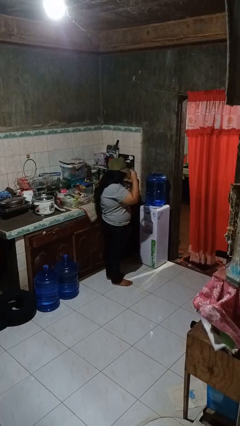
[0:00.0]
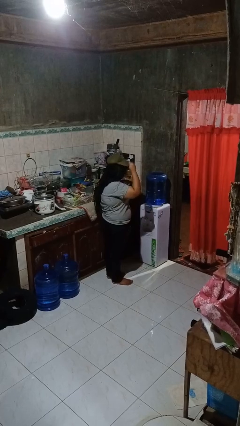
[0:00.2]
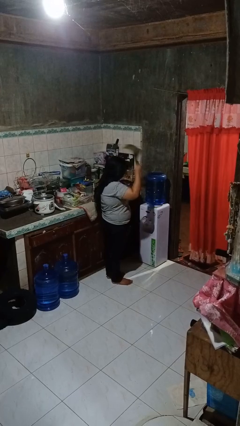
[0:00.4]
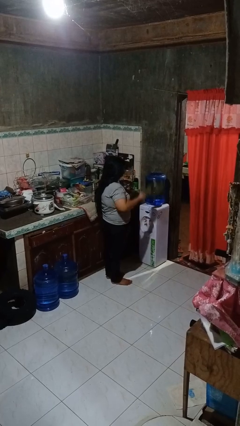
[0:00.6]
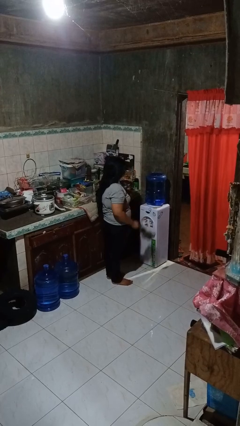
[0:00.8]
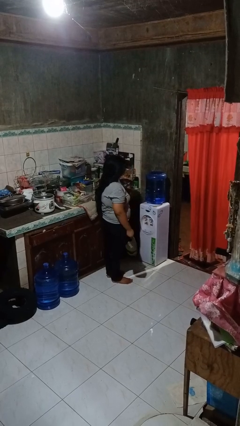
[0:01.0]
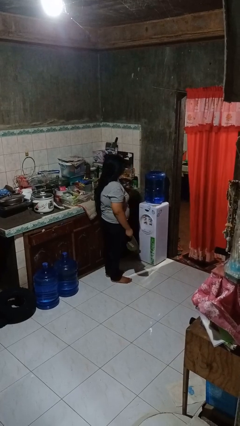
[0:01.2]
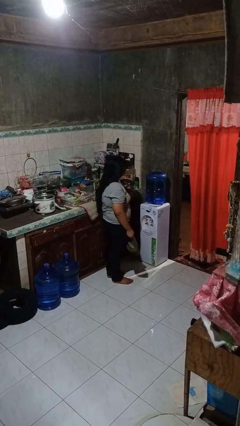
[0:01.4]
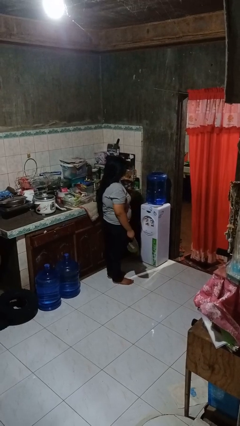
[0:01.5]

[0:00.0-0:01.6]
person takes off hat

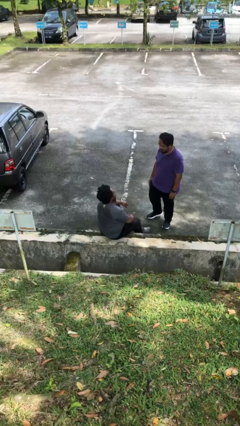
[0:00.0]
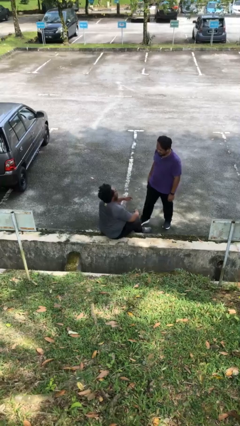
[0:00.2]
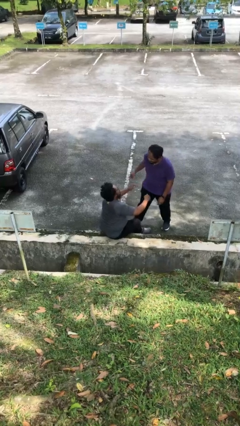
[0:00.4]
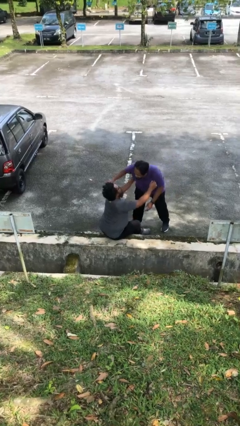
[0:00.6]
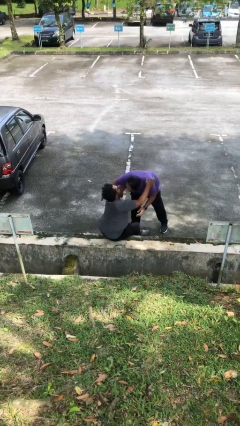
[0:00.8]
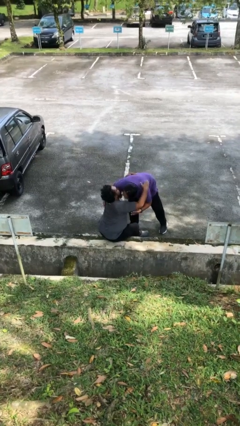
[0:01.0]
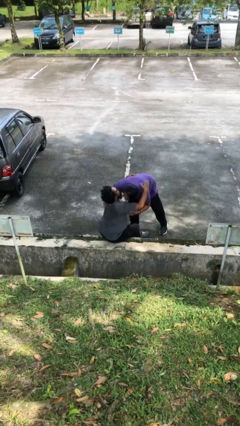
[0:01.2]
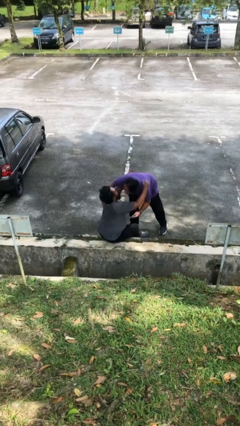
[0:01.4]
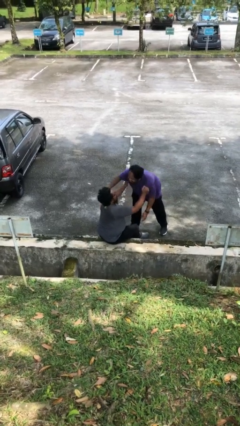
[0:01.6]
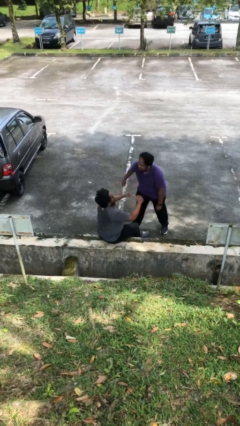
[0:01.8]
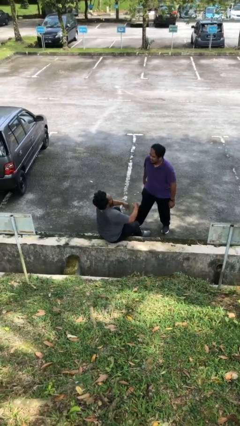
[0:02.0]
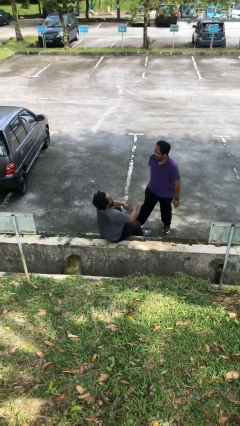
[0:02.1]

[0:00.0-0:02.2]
person embraces person

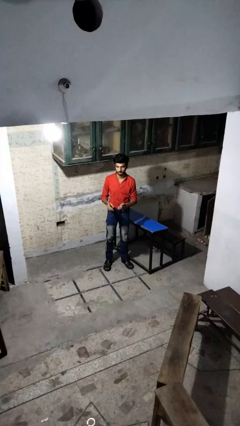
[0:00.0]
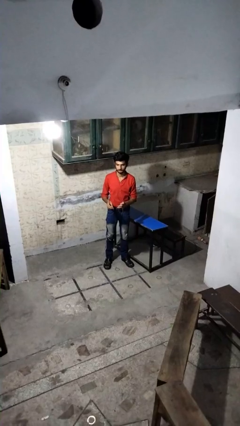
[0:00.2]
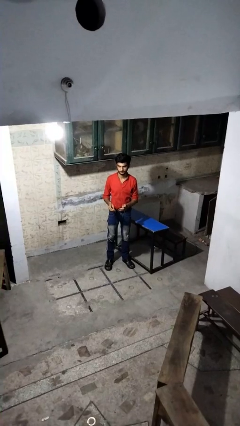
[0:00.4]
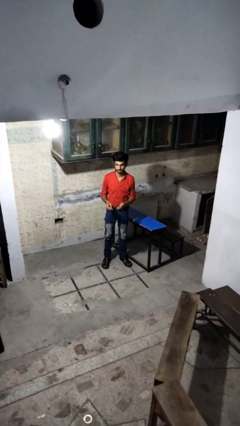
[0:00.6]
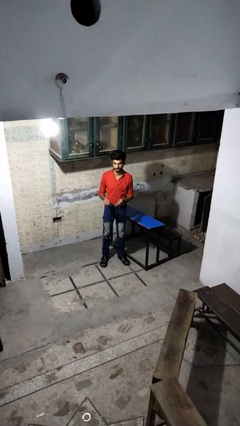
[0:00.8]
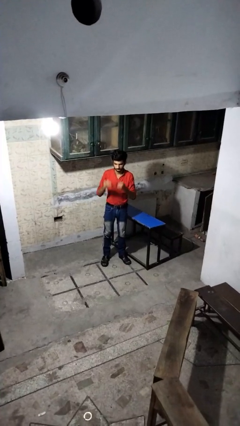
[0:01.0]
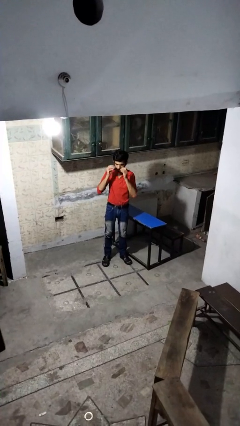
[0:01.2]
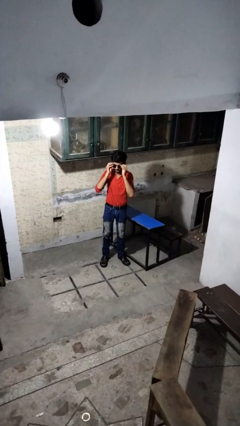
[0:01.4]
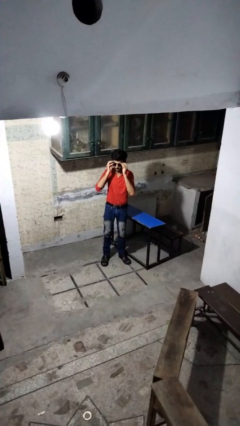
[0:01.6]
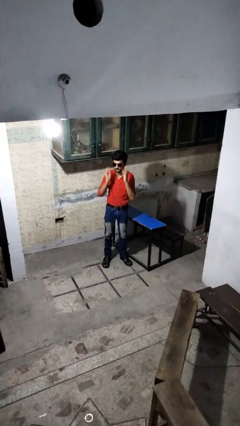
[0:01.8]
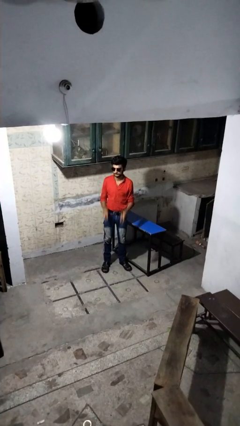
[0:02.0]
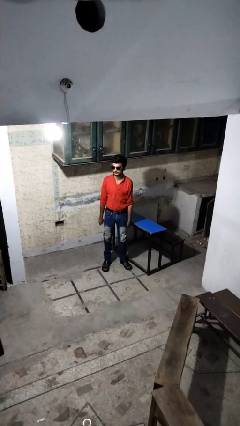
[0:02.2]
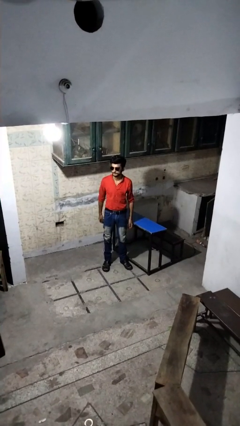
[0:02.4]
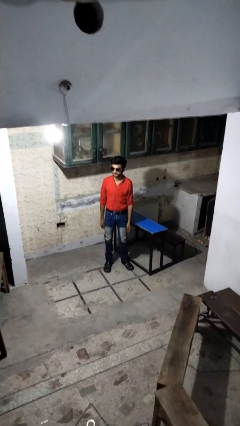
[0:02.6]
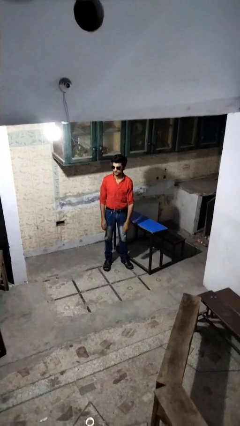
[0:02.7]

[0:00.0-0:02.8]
person puts on sunglasses

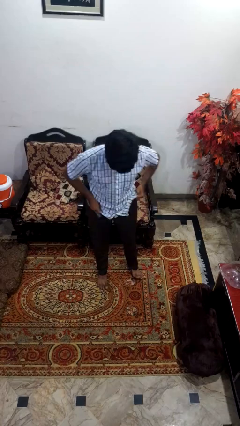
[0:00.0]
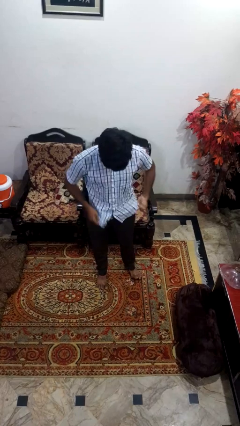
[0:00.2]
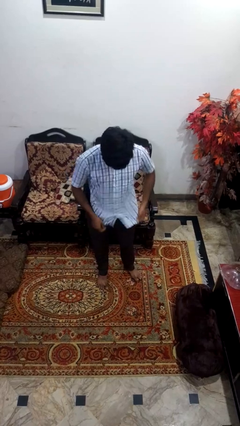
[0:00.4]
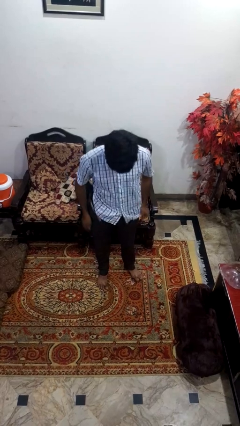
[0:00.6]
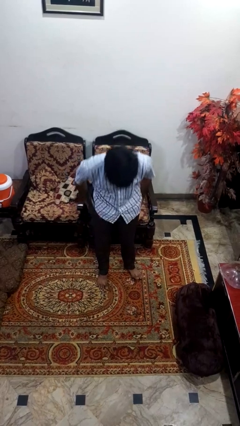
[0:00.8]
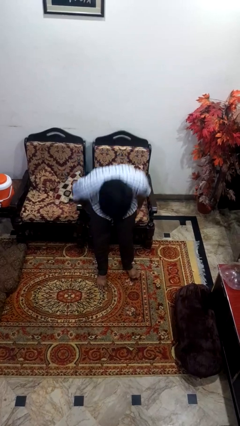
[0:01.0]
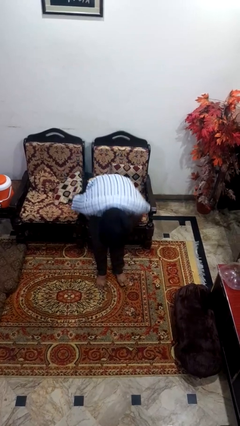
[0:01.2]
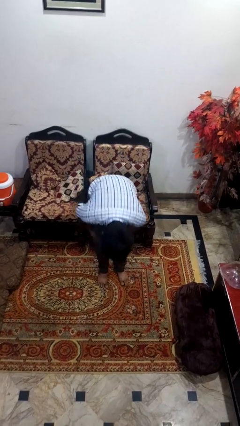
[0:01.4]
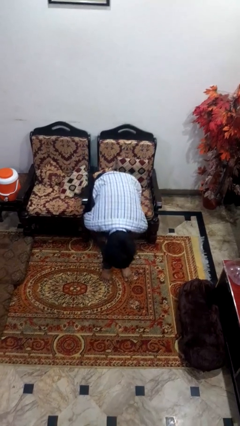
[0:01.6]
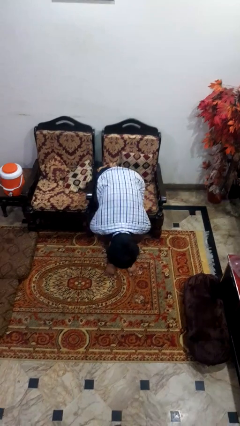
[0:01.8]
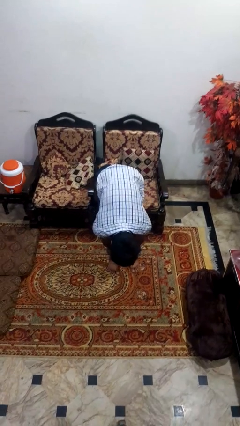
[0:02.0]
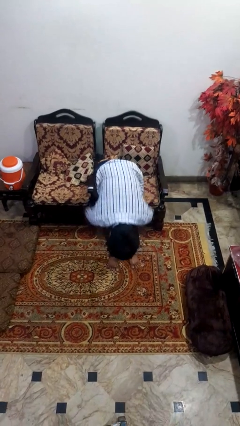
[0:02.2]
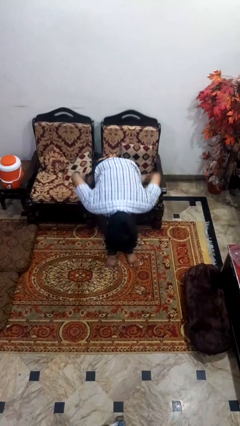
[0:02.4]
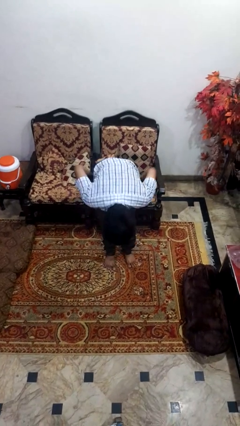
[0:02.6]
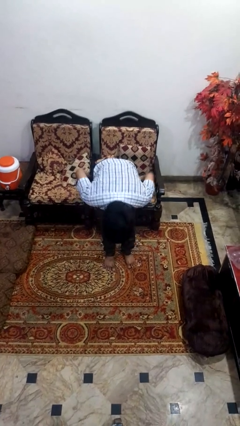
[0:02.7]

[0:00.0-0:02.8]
person takes off pants

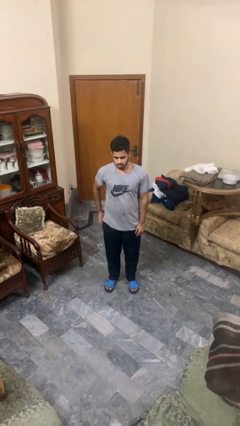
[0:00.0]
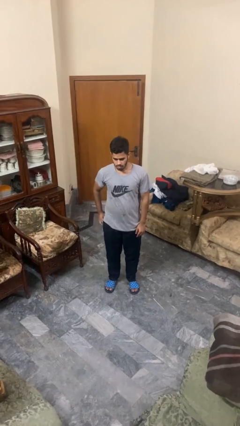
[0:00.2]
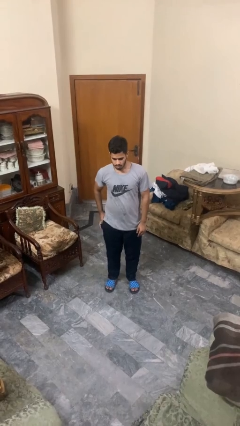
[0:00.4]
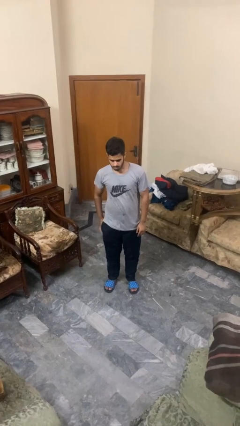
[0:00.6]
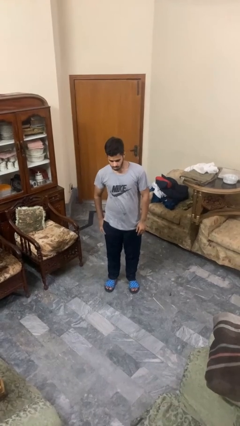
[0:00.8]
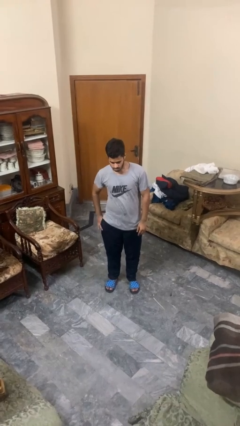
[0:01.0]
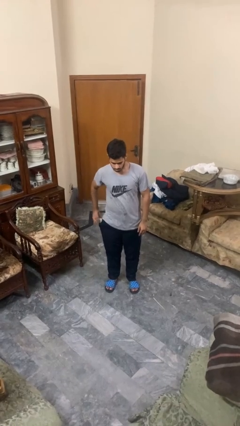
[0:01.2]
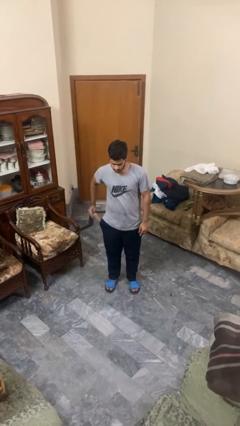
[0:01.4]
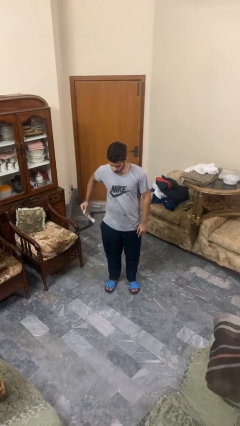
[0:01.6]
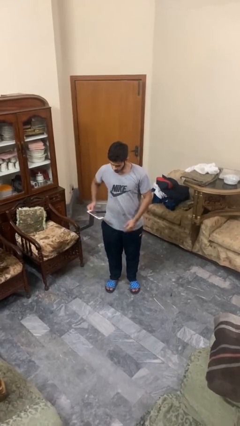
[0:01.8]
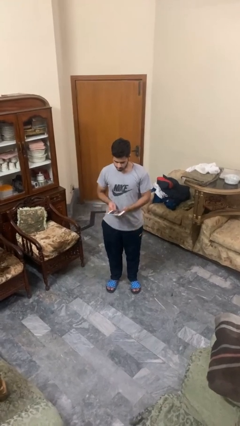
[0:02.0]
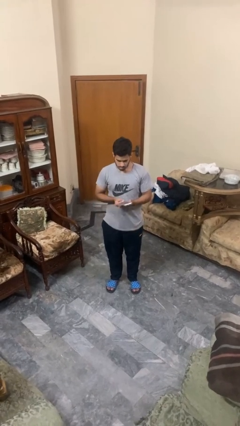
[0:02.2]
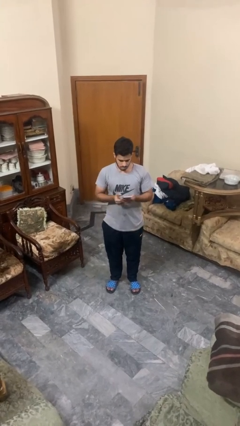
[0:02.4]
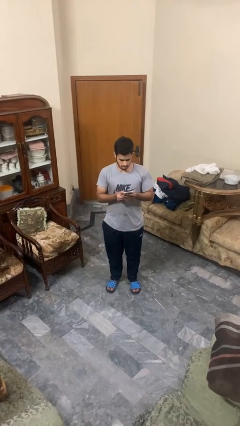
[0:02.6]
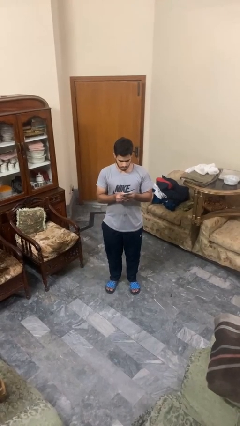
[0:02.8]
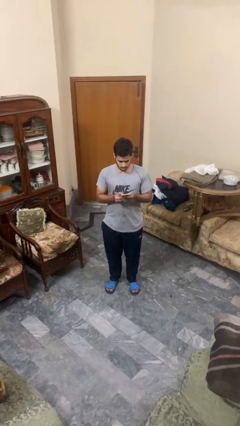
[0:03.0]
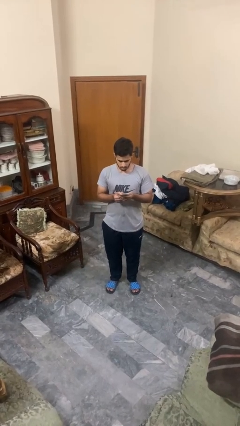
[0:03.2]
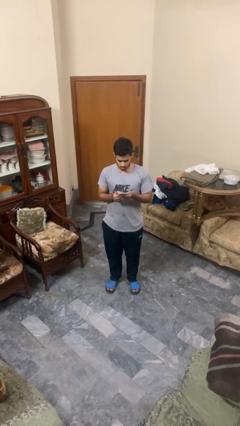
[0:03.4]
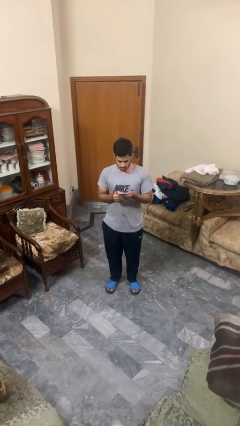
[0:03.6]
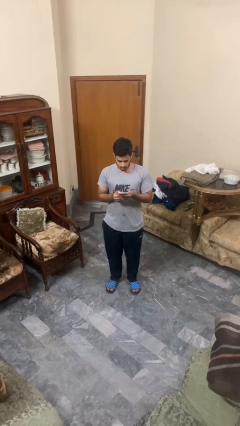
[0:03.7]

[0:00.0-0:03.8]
person takes phone from pocket

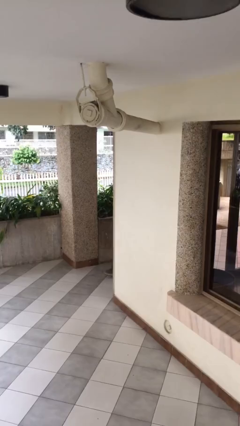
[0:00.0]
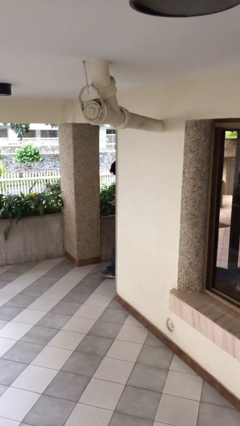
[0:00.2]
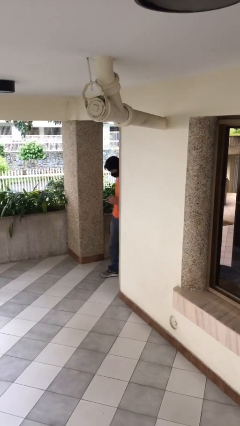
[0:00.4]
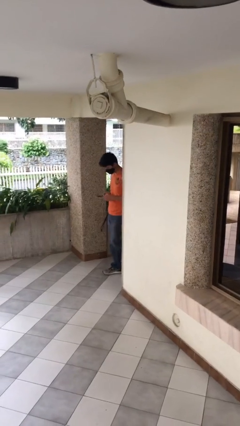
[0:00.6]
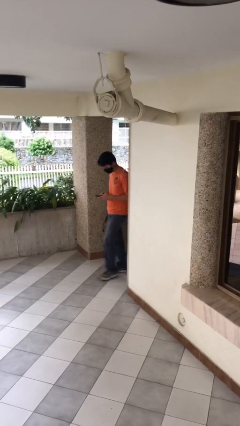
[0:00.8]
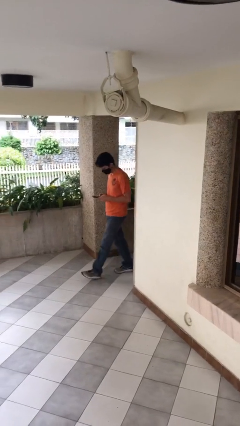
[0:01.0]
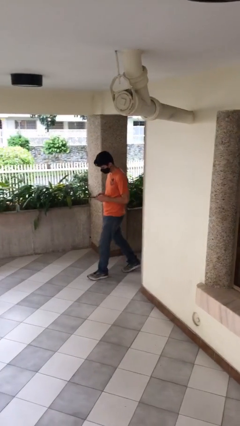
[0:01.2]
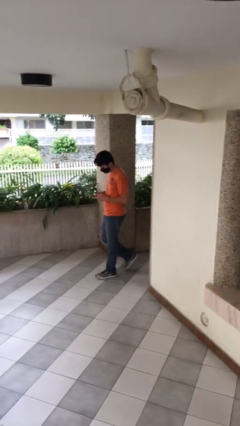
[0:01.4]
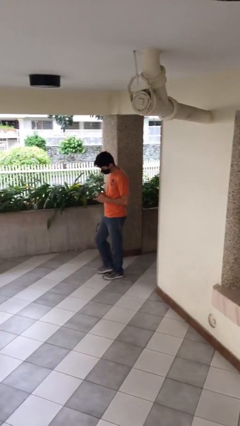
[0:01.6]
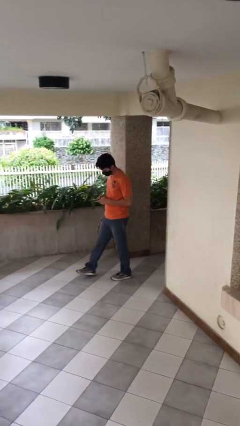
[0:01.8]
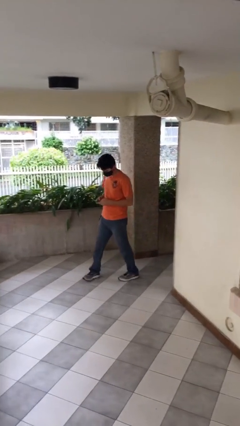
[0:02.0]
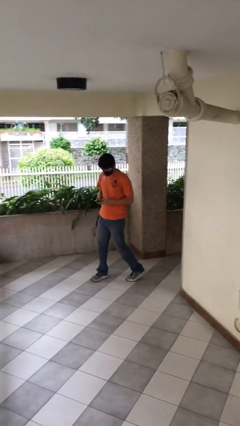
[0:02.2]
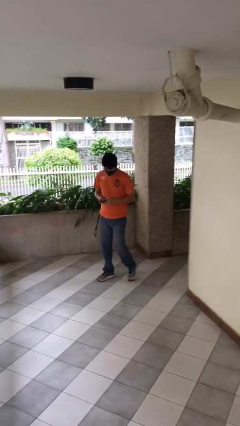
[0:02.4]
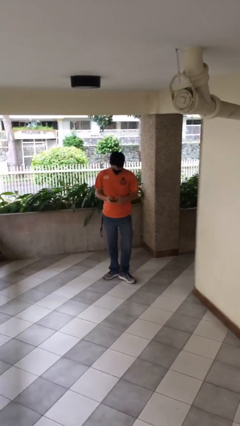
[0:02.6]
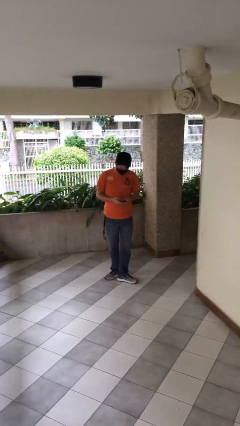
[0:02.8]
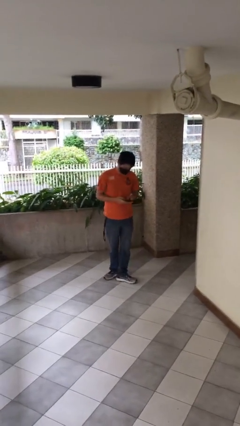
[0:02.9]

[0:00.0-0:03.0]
person enters scene through structure

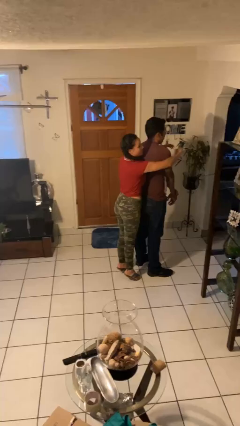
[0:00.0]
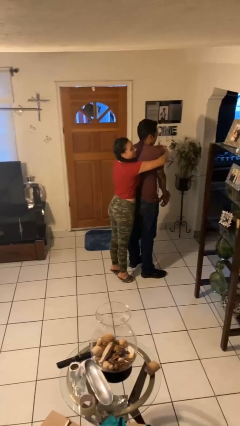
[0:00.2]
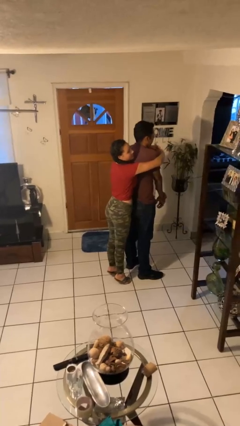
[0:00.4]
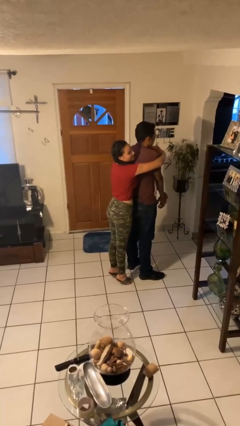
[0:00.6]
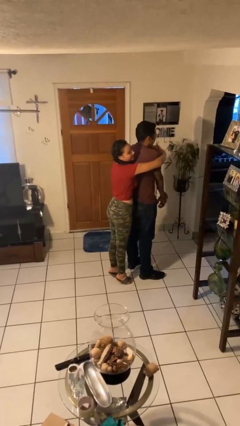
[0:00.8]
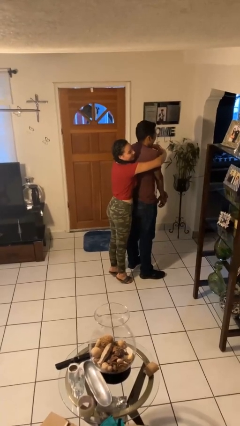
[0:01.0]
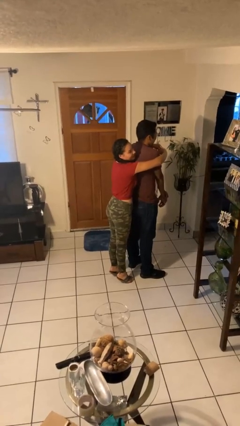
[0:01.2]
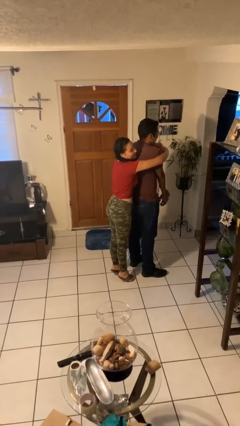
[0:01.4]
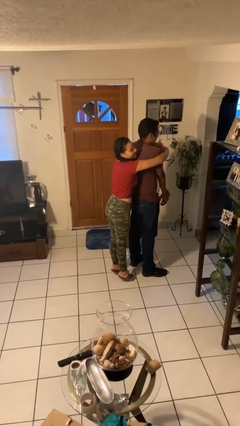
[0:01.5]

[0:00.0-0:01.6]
person hugs person from behind
